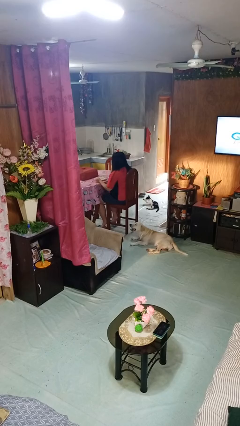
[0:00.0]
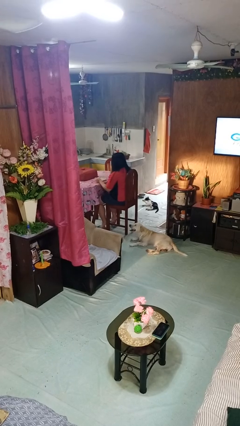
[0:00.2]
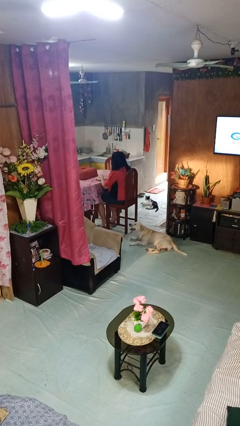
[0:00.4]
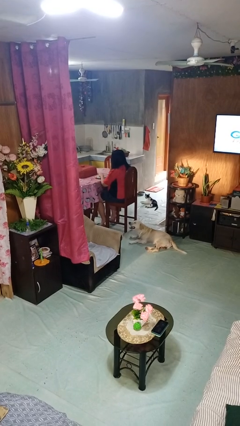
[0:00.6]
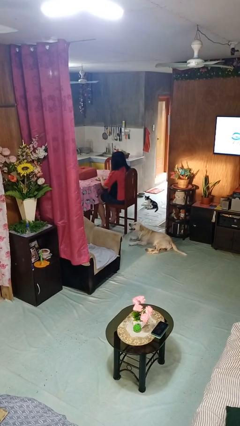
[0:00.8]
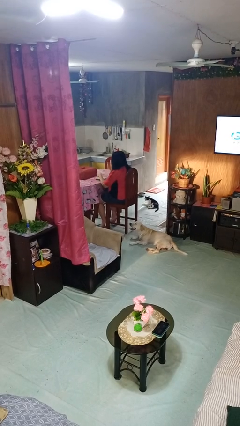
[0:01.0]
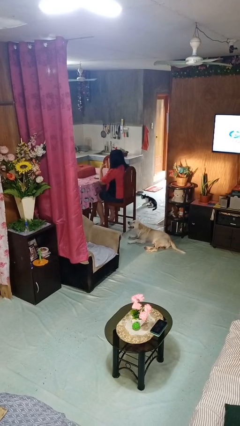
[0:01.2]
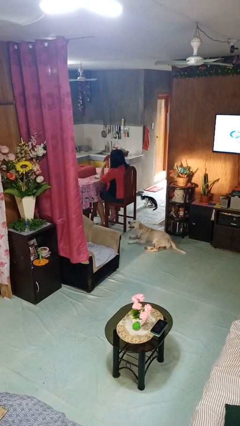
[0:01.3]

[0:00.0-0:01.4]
person eats with hands

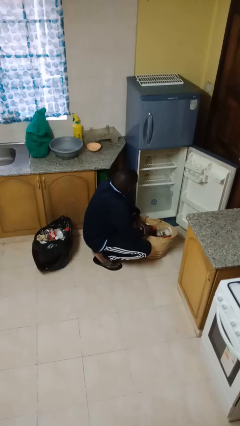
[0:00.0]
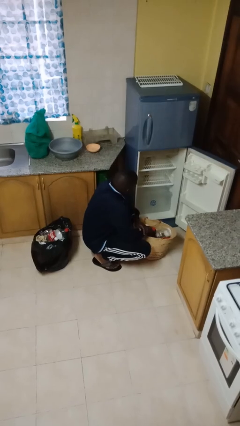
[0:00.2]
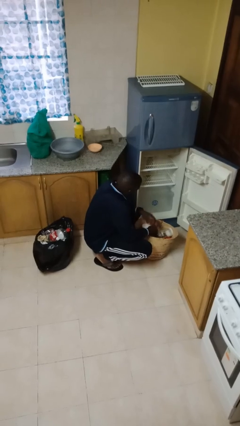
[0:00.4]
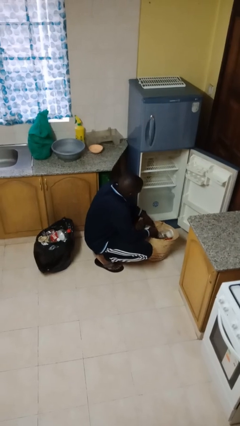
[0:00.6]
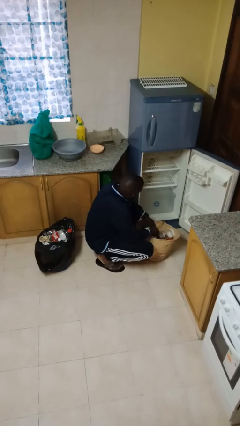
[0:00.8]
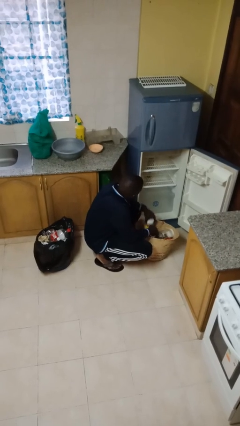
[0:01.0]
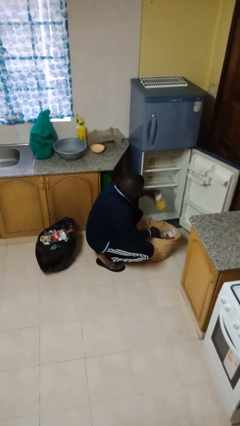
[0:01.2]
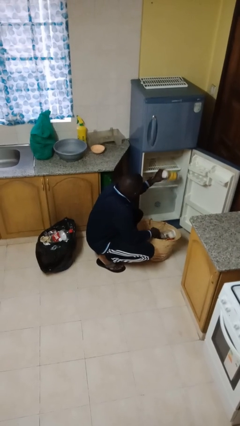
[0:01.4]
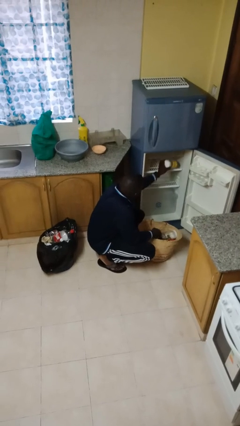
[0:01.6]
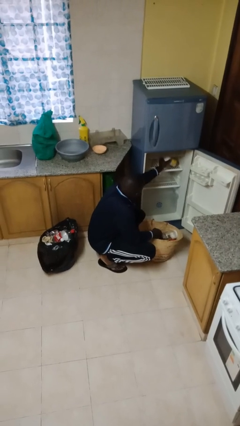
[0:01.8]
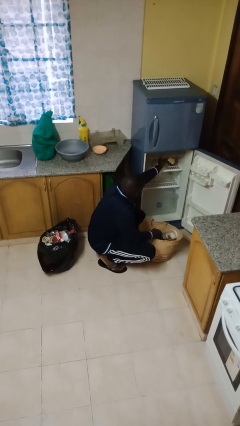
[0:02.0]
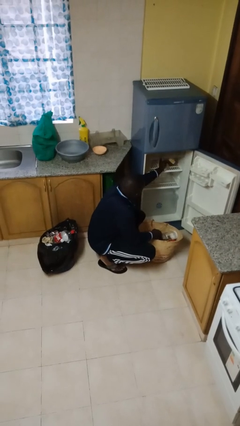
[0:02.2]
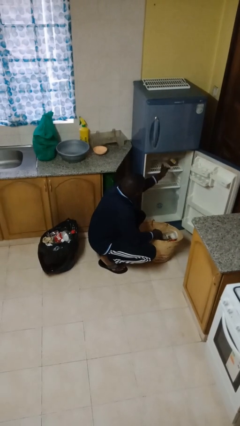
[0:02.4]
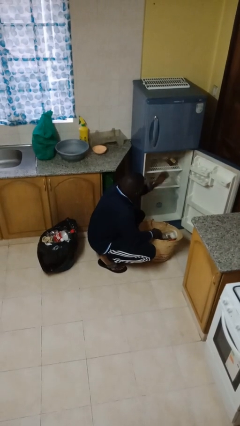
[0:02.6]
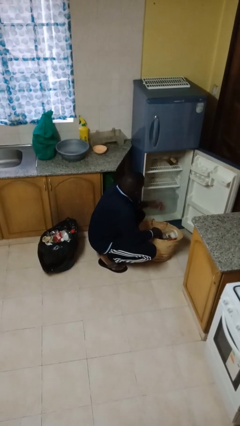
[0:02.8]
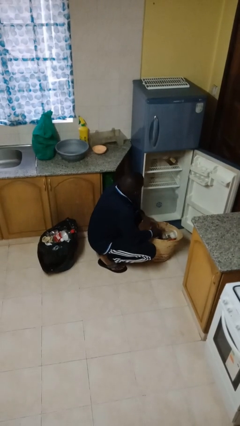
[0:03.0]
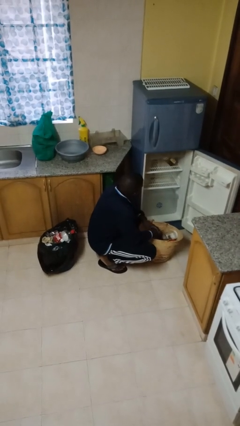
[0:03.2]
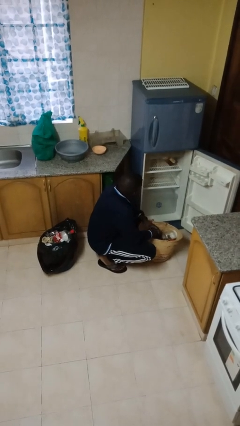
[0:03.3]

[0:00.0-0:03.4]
person loads groceries into refrigerator

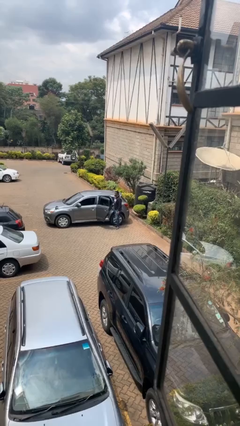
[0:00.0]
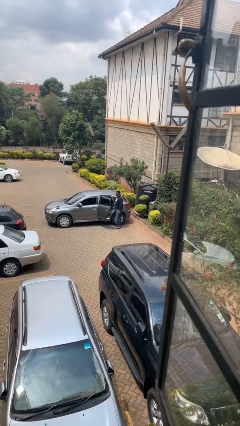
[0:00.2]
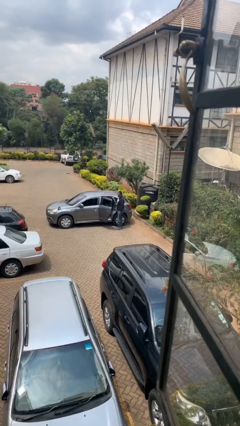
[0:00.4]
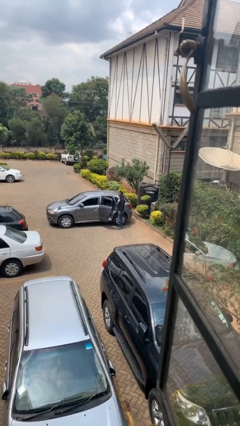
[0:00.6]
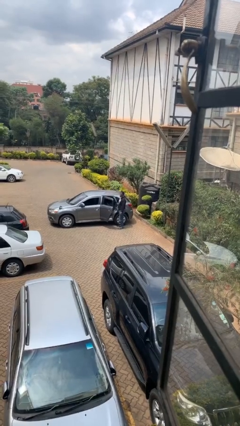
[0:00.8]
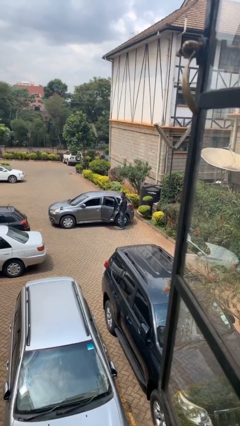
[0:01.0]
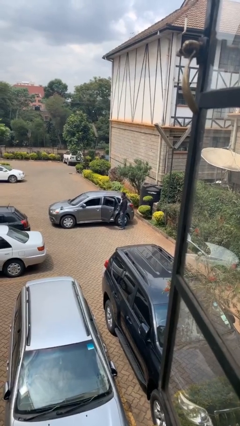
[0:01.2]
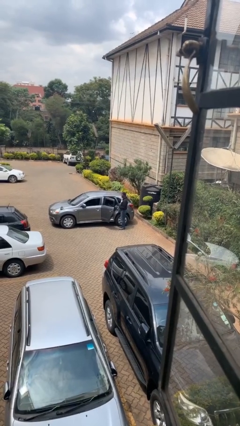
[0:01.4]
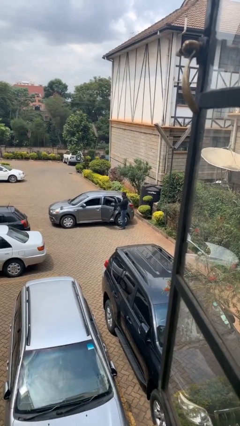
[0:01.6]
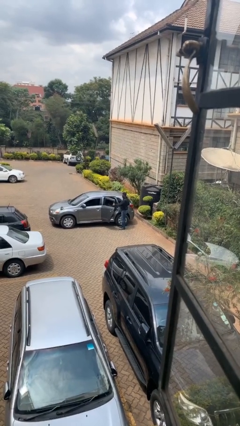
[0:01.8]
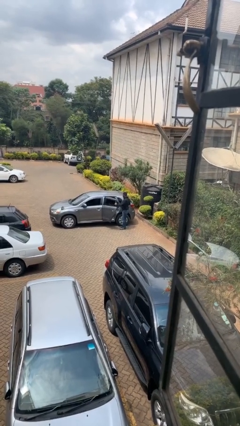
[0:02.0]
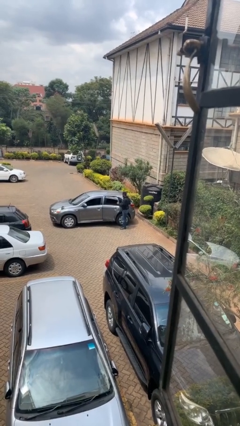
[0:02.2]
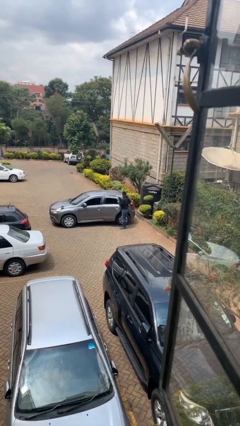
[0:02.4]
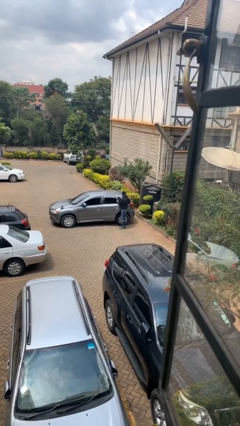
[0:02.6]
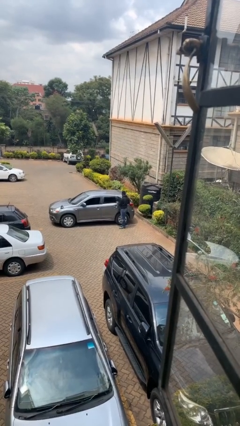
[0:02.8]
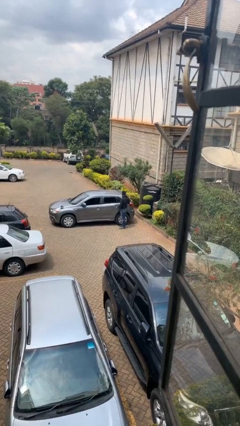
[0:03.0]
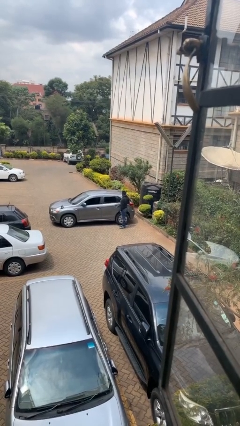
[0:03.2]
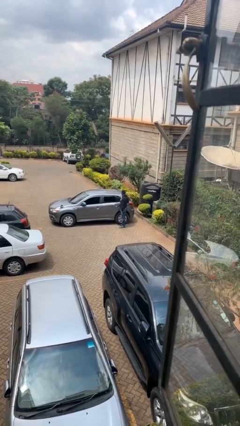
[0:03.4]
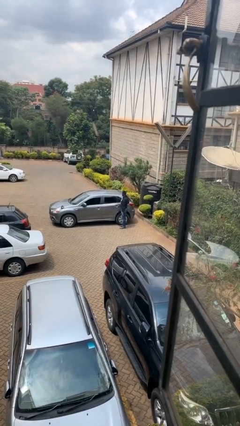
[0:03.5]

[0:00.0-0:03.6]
person closes car door

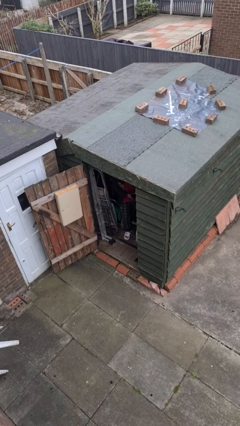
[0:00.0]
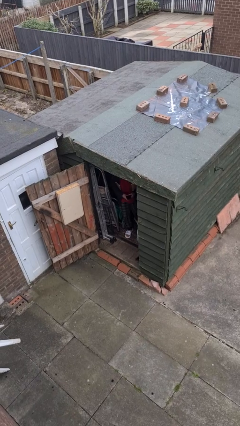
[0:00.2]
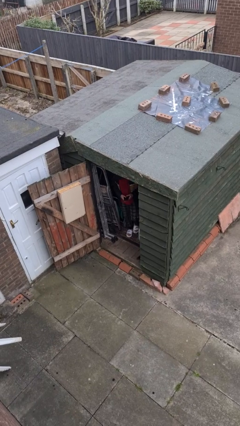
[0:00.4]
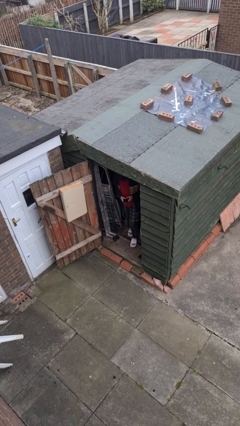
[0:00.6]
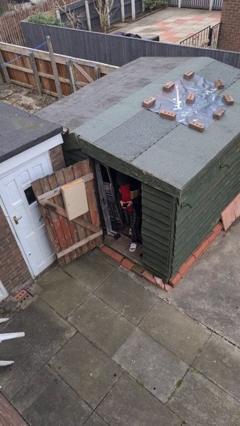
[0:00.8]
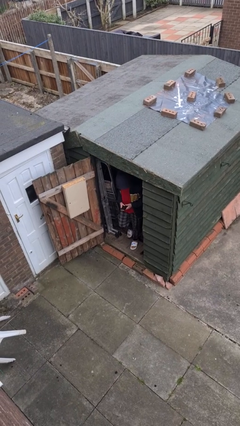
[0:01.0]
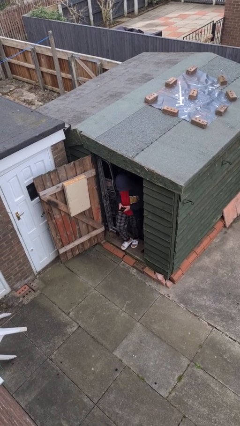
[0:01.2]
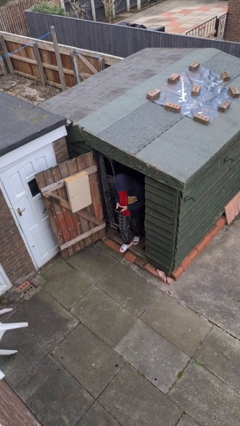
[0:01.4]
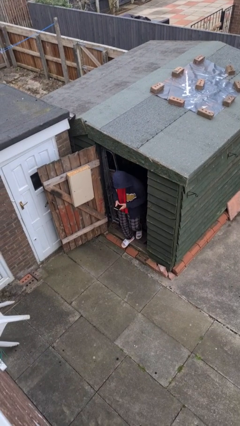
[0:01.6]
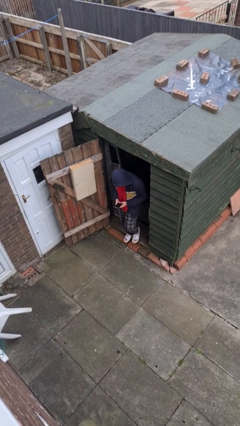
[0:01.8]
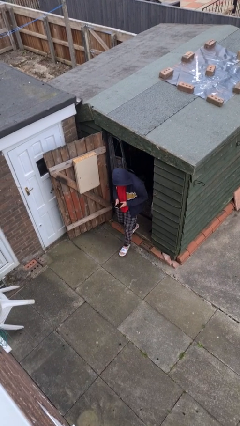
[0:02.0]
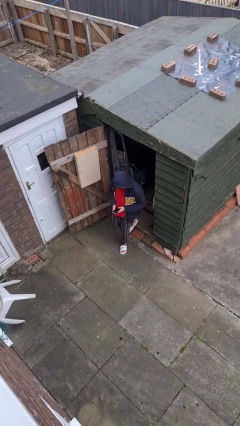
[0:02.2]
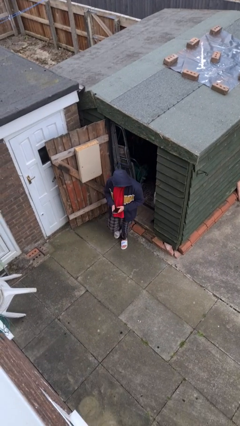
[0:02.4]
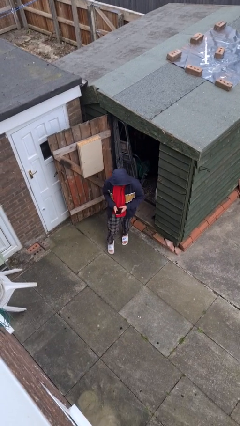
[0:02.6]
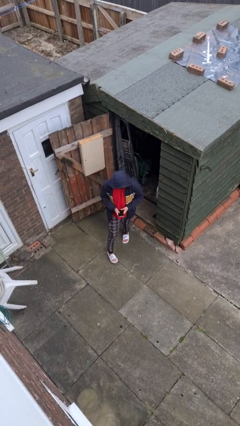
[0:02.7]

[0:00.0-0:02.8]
person enters scene through structure

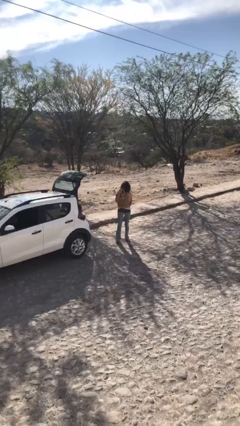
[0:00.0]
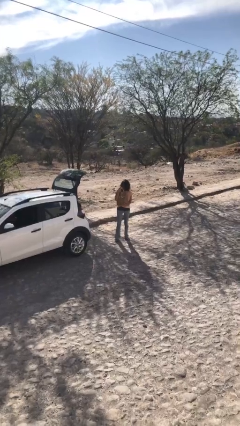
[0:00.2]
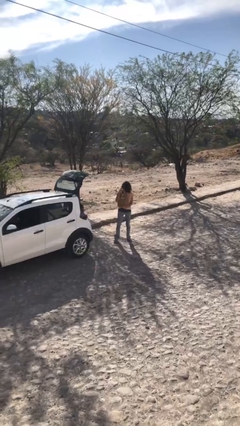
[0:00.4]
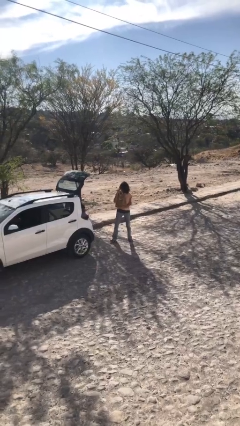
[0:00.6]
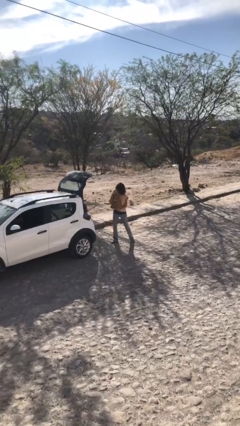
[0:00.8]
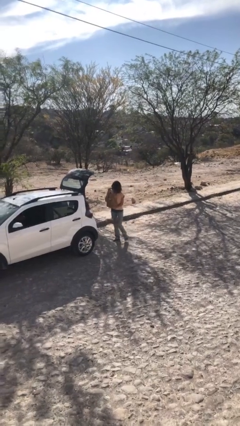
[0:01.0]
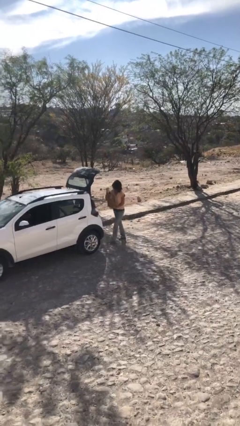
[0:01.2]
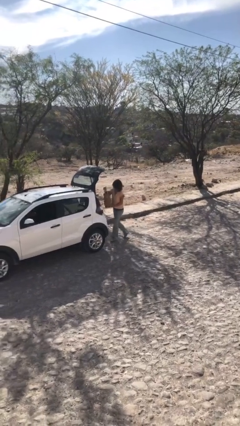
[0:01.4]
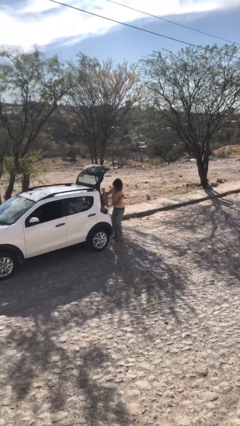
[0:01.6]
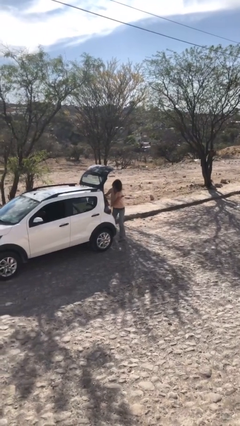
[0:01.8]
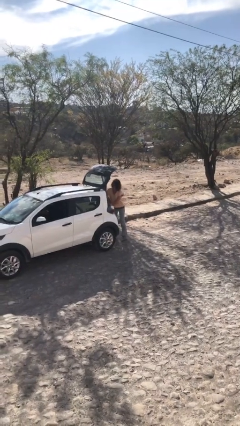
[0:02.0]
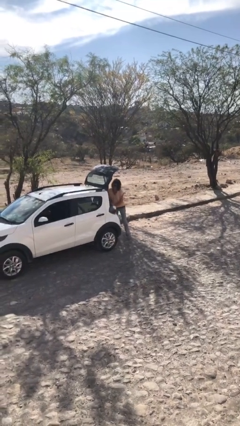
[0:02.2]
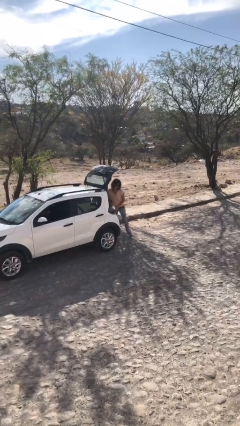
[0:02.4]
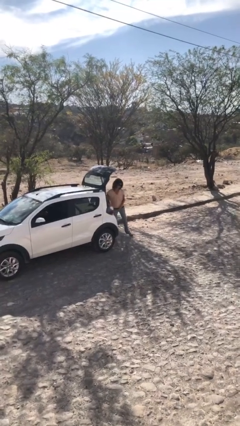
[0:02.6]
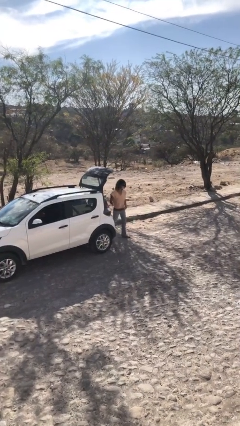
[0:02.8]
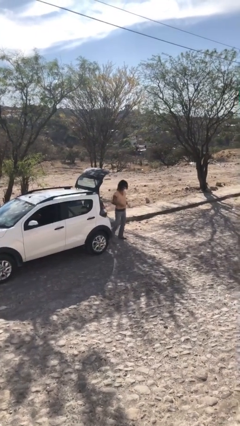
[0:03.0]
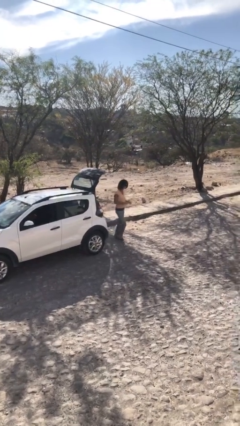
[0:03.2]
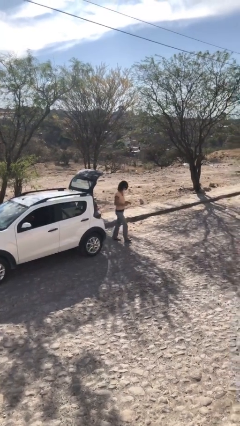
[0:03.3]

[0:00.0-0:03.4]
person loads car

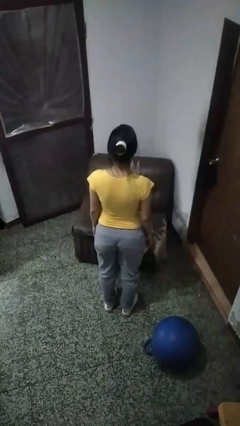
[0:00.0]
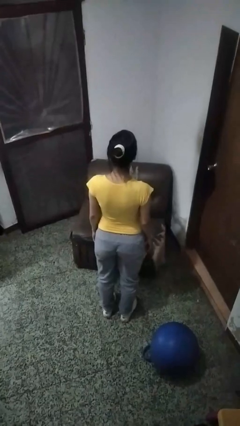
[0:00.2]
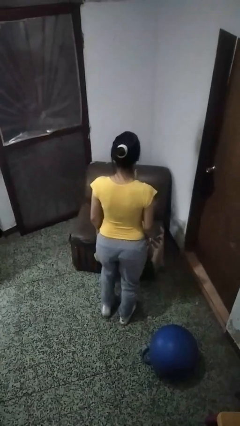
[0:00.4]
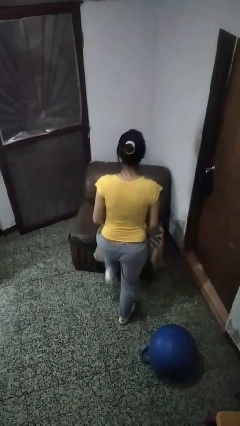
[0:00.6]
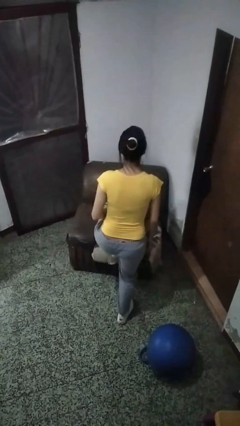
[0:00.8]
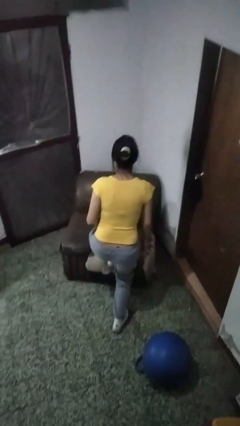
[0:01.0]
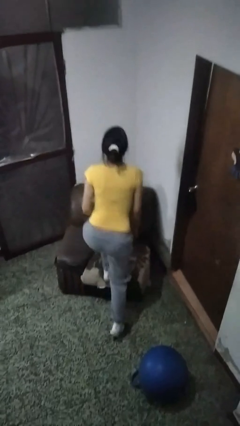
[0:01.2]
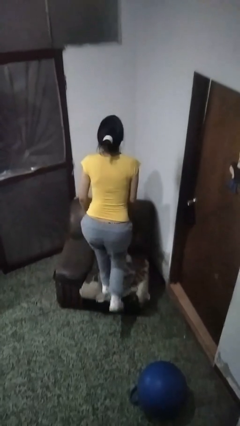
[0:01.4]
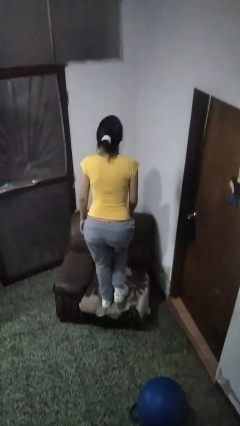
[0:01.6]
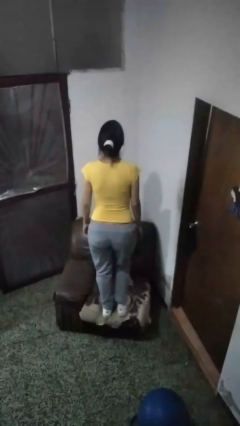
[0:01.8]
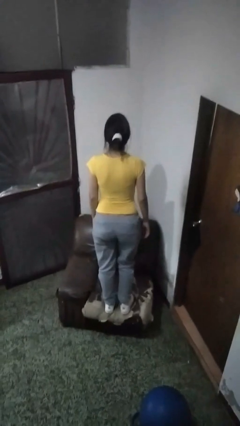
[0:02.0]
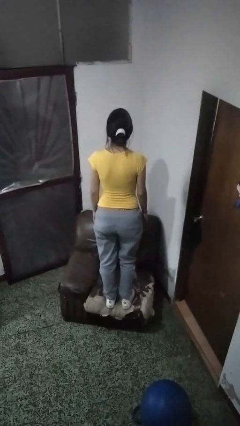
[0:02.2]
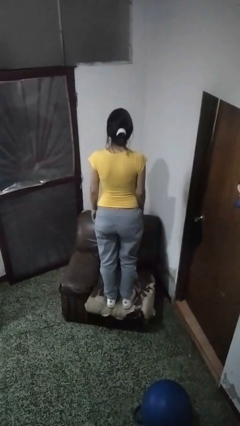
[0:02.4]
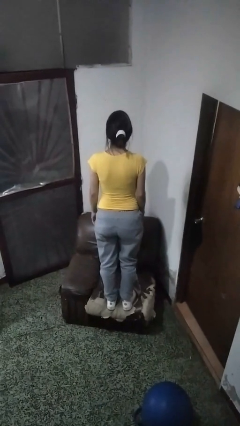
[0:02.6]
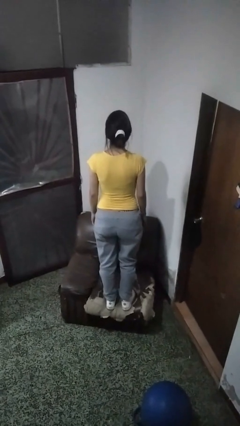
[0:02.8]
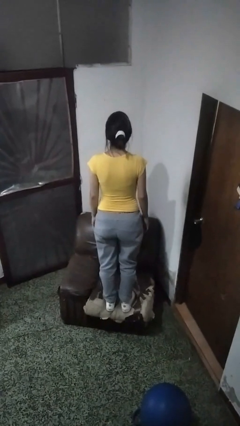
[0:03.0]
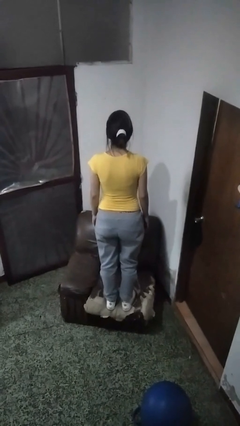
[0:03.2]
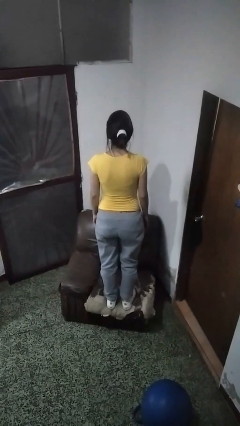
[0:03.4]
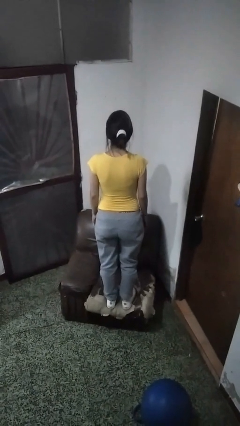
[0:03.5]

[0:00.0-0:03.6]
person climbs on couch
